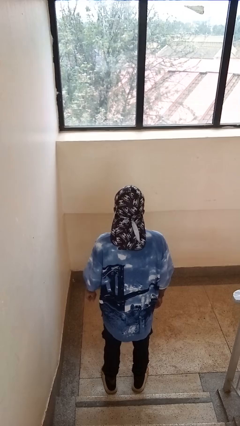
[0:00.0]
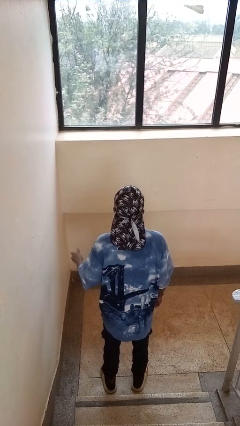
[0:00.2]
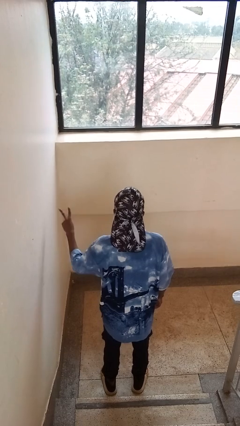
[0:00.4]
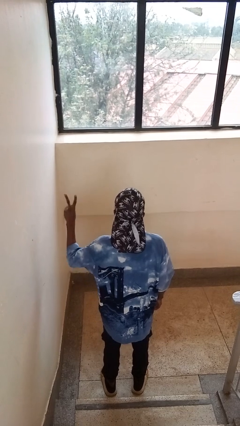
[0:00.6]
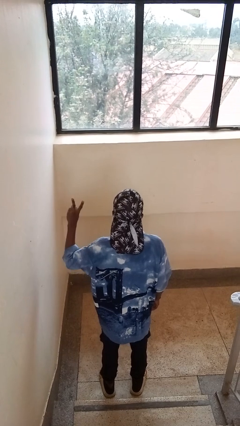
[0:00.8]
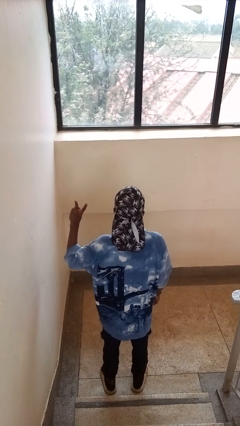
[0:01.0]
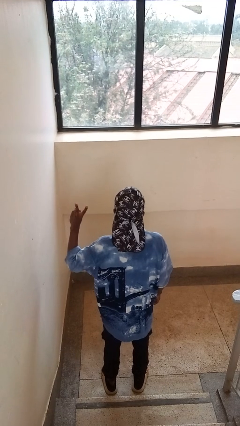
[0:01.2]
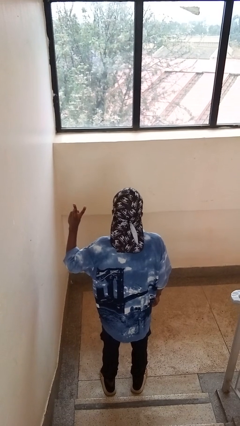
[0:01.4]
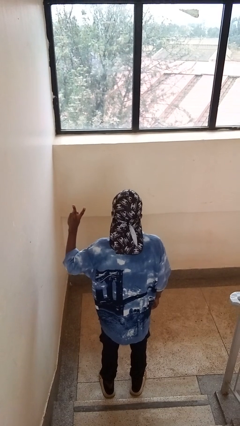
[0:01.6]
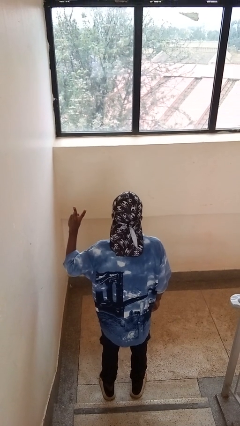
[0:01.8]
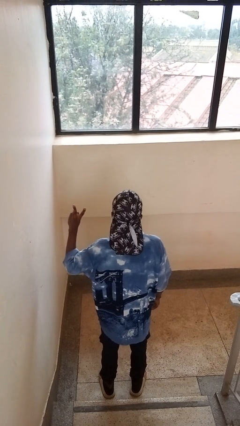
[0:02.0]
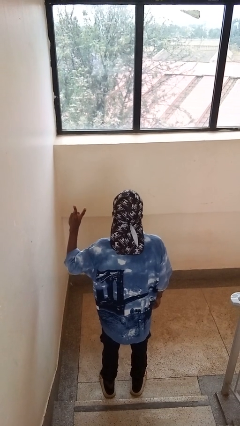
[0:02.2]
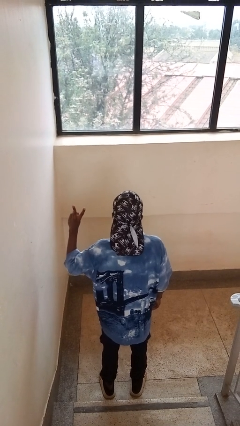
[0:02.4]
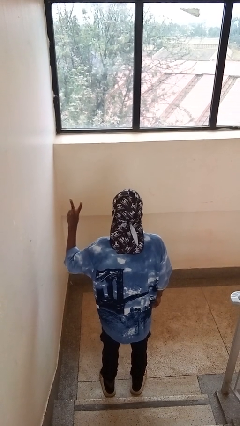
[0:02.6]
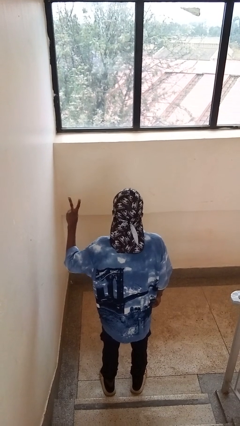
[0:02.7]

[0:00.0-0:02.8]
person gestures peace

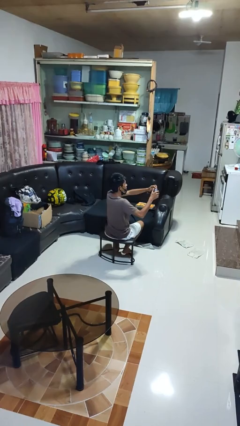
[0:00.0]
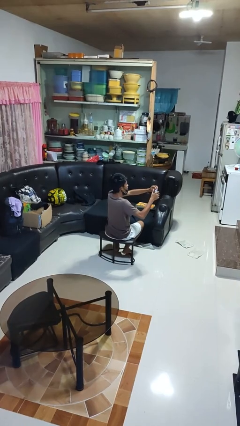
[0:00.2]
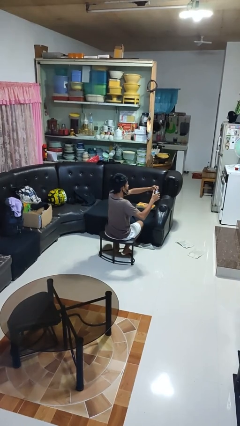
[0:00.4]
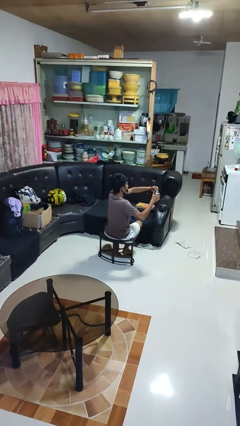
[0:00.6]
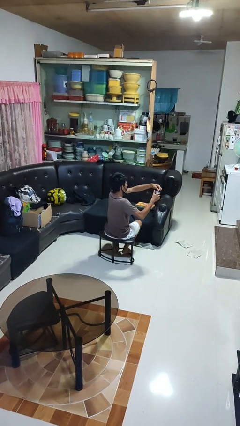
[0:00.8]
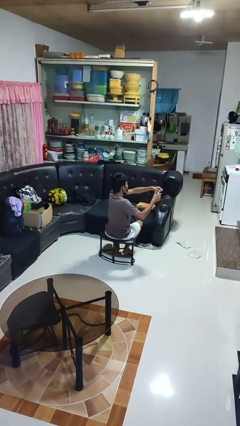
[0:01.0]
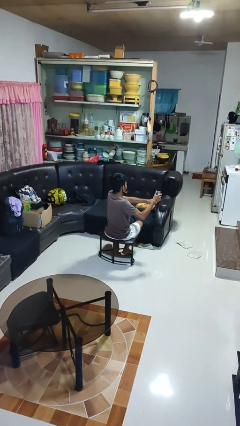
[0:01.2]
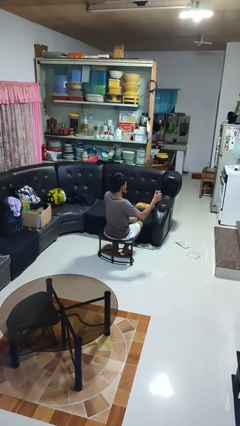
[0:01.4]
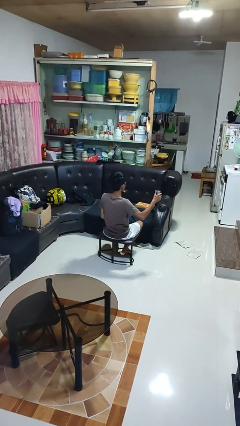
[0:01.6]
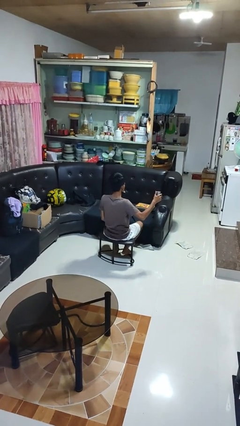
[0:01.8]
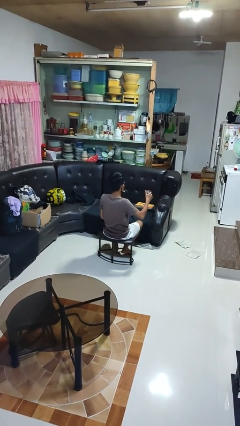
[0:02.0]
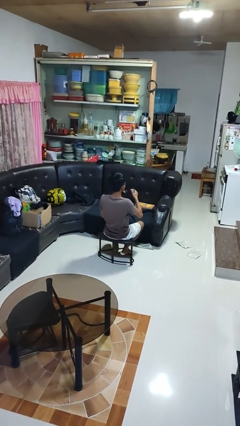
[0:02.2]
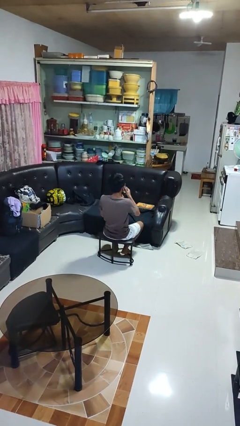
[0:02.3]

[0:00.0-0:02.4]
person opens beverage can

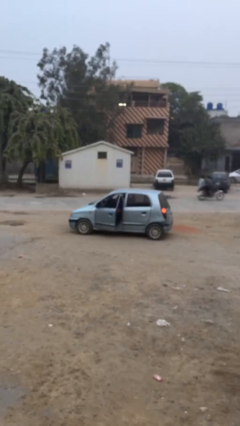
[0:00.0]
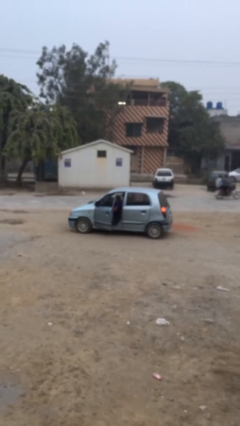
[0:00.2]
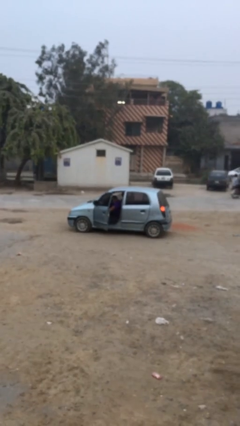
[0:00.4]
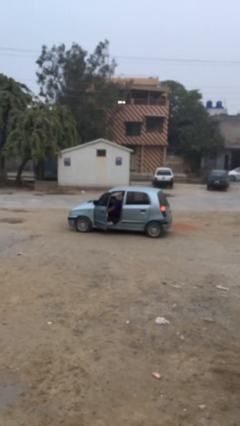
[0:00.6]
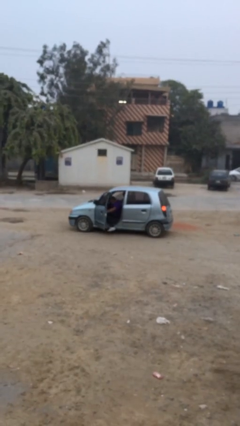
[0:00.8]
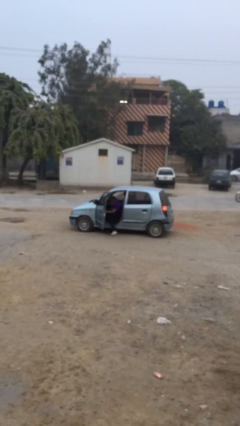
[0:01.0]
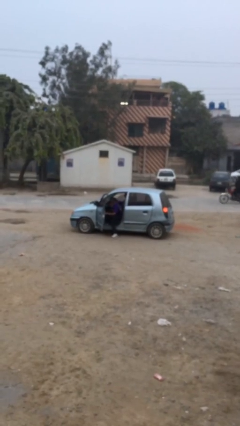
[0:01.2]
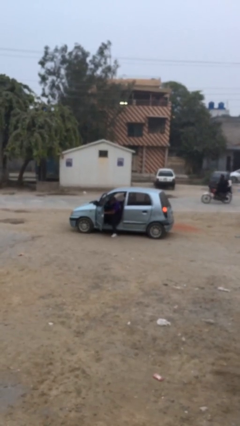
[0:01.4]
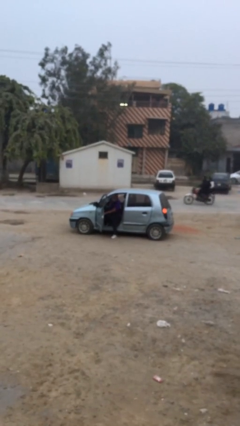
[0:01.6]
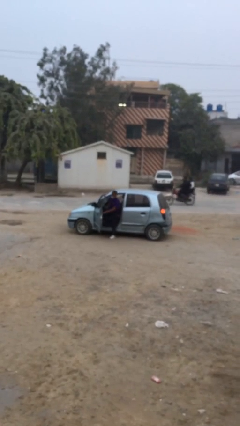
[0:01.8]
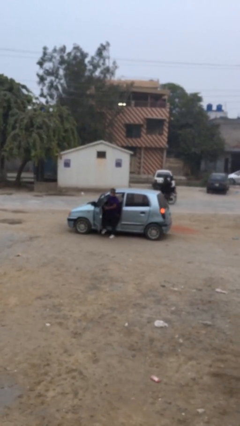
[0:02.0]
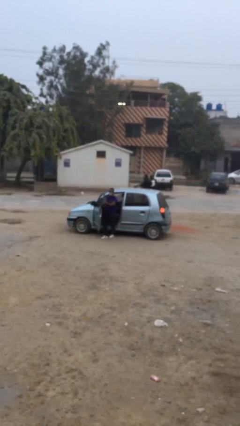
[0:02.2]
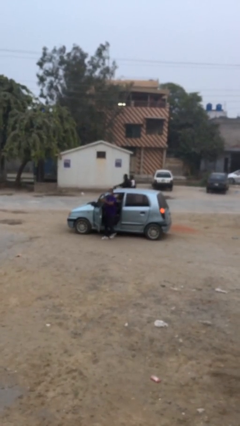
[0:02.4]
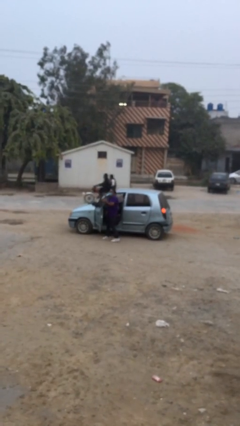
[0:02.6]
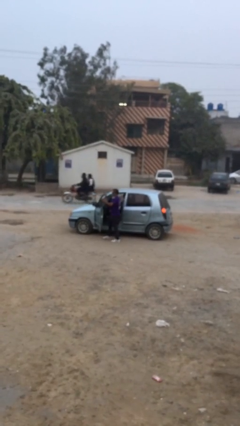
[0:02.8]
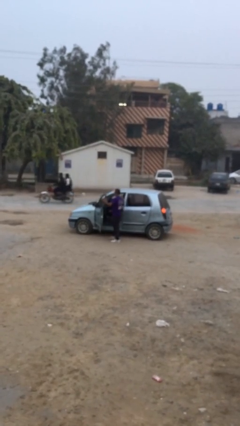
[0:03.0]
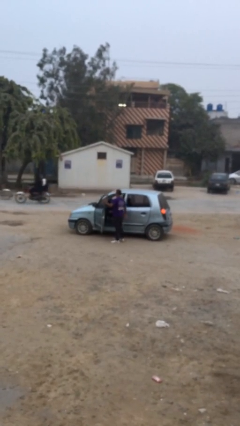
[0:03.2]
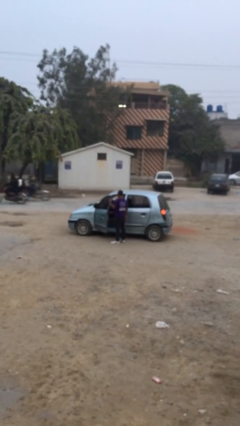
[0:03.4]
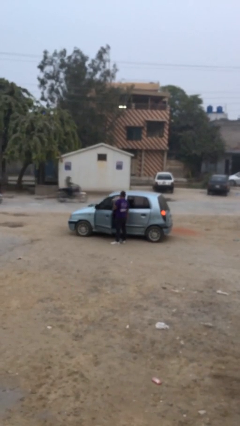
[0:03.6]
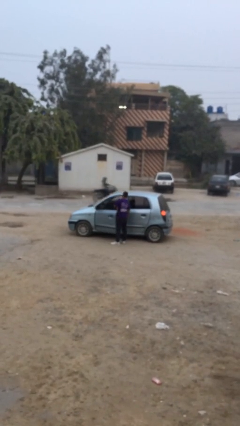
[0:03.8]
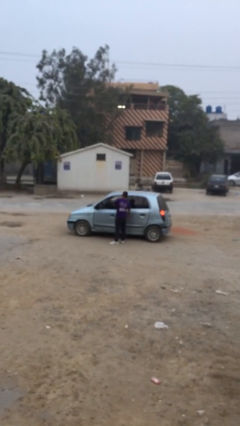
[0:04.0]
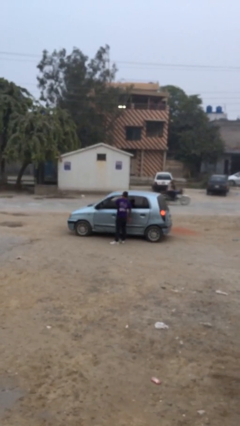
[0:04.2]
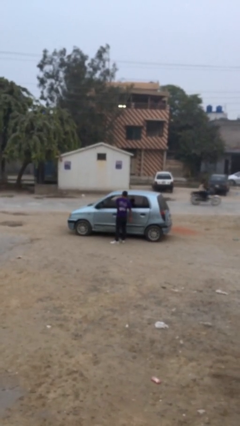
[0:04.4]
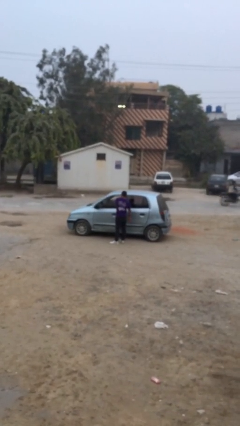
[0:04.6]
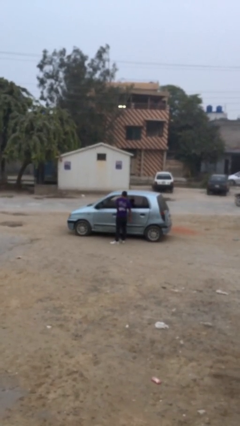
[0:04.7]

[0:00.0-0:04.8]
car drops off person

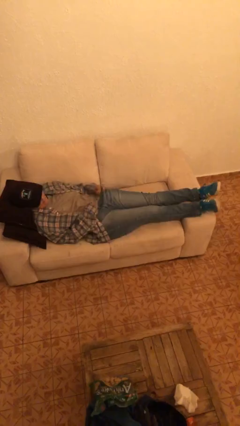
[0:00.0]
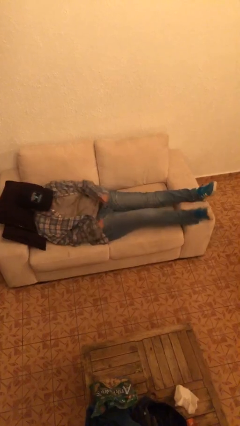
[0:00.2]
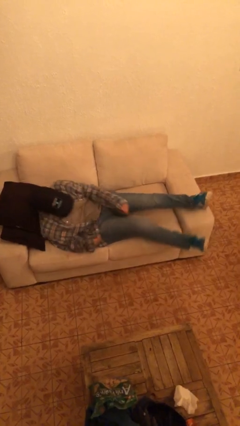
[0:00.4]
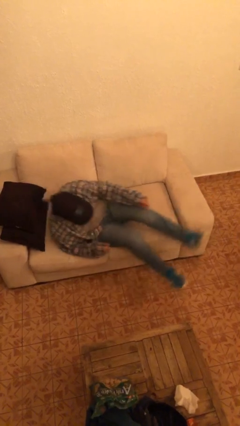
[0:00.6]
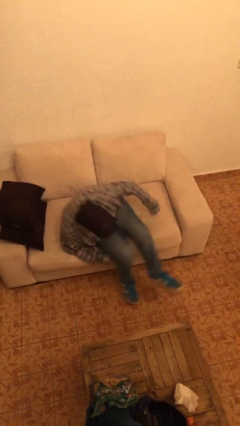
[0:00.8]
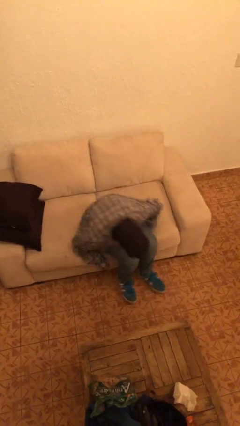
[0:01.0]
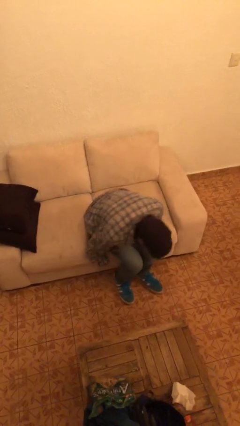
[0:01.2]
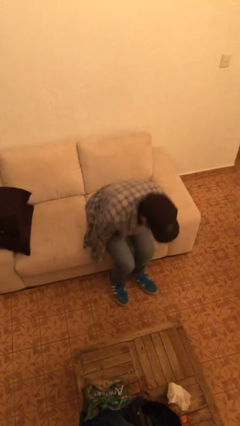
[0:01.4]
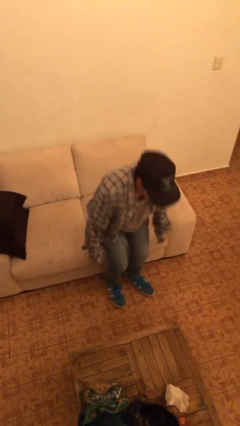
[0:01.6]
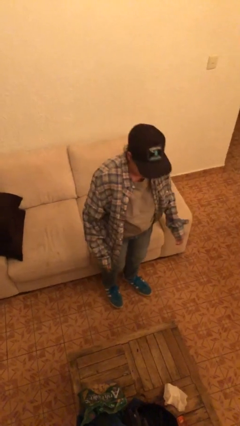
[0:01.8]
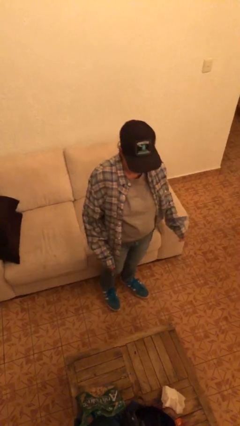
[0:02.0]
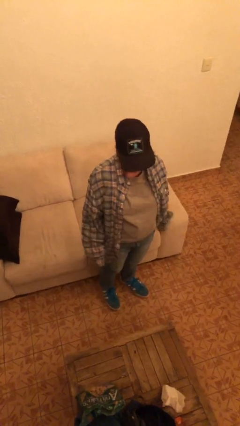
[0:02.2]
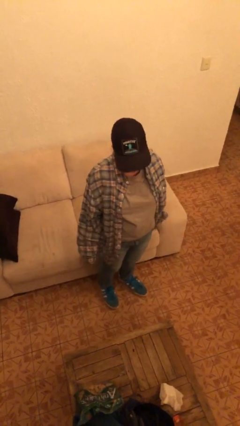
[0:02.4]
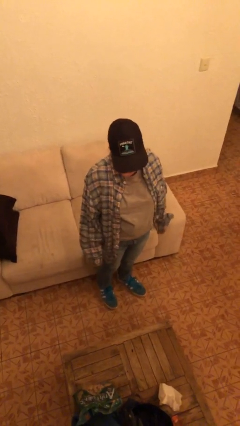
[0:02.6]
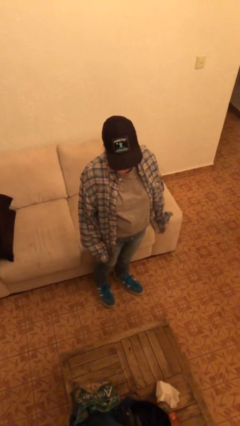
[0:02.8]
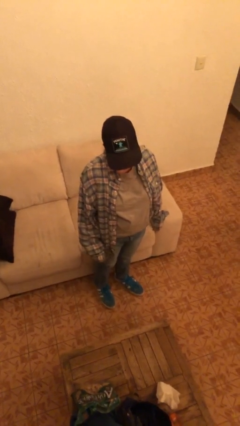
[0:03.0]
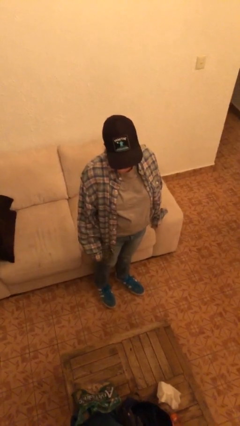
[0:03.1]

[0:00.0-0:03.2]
person stands up

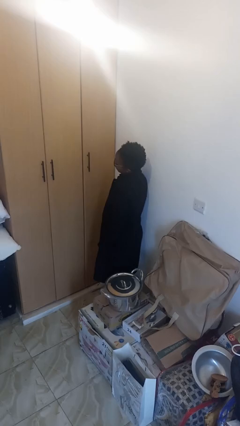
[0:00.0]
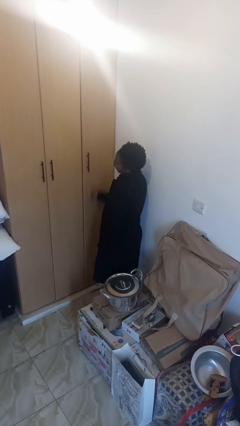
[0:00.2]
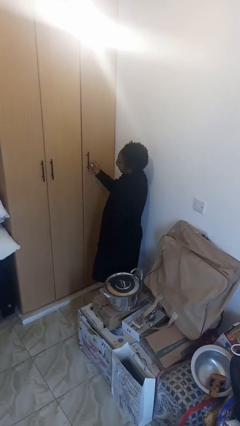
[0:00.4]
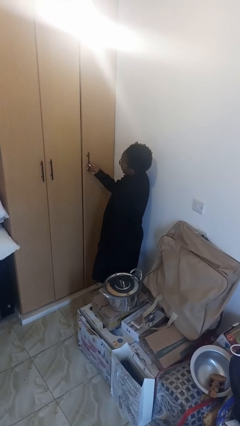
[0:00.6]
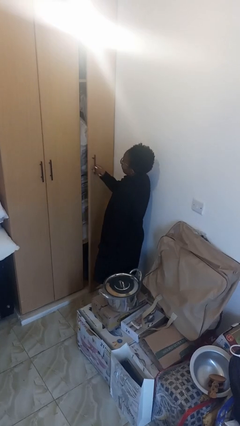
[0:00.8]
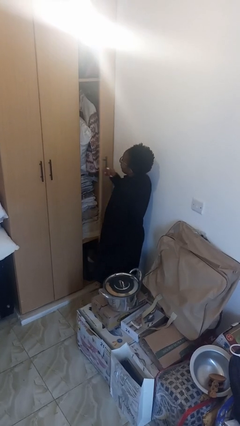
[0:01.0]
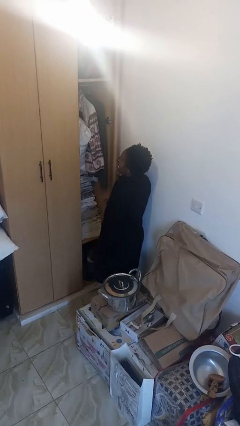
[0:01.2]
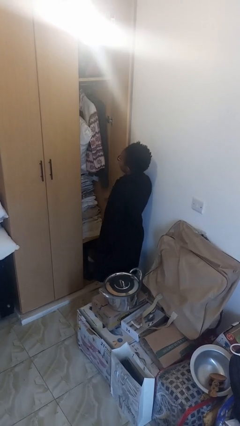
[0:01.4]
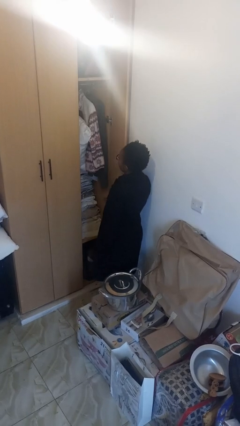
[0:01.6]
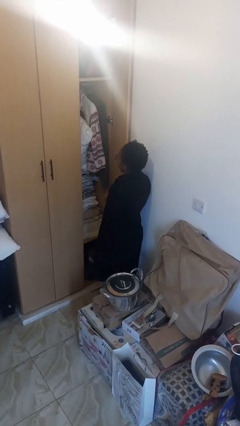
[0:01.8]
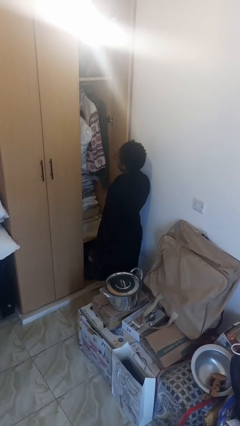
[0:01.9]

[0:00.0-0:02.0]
person opens closet door

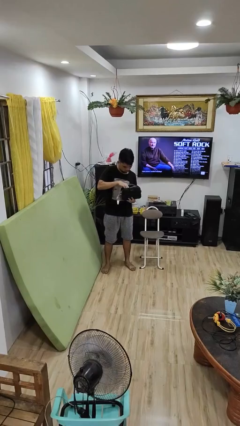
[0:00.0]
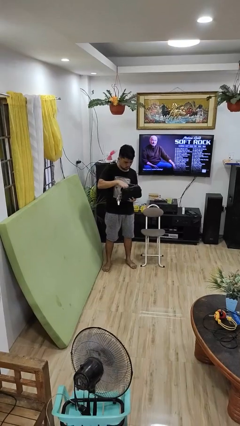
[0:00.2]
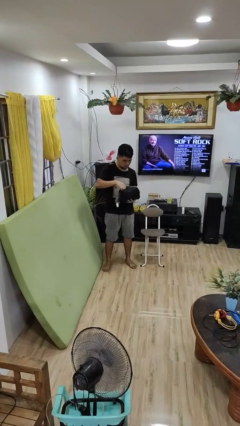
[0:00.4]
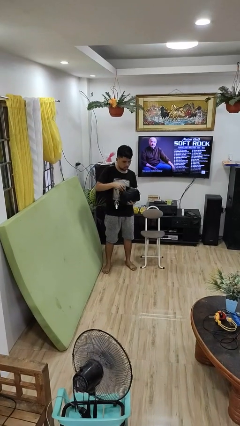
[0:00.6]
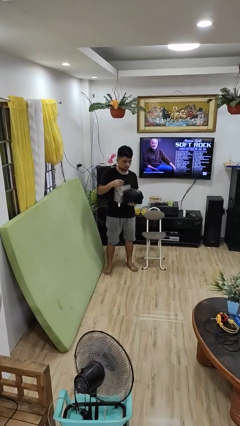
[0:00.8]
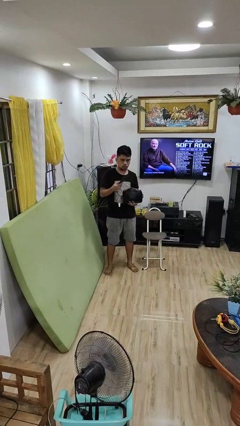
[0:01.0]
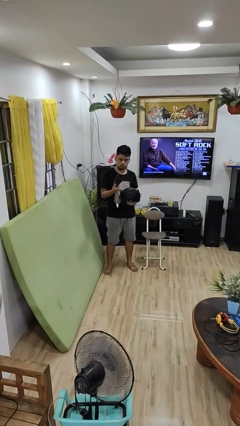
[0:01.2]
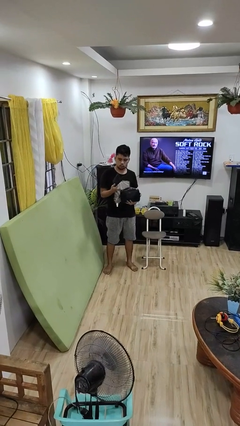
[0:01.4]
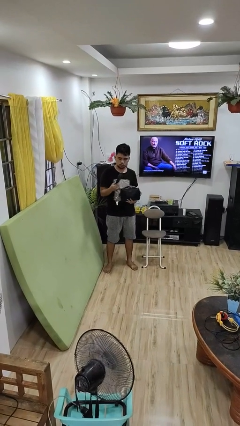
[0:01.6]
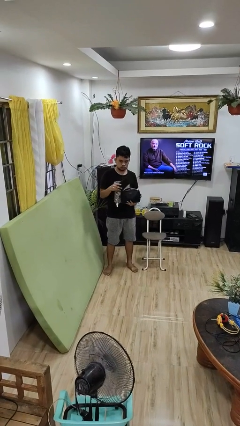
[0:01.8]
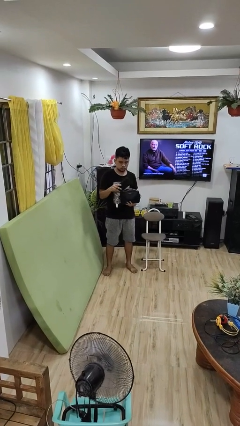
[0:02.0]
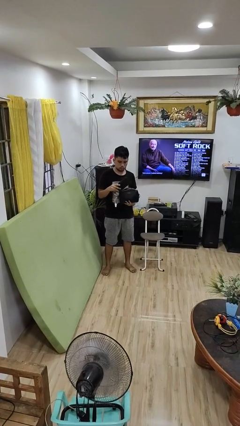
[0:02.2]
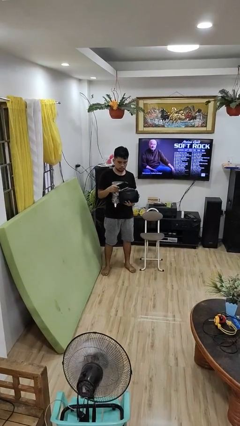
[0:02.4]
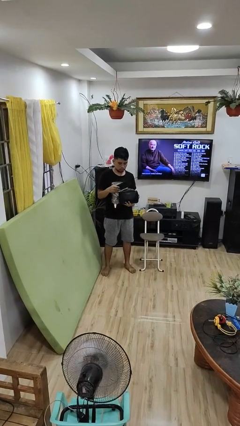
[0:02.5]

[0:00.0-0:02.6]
person takes object from purse
